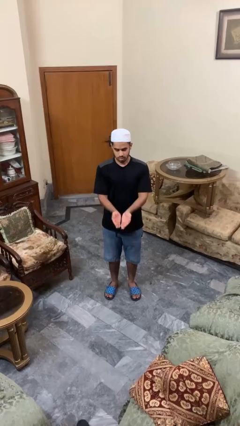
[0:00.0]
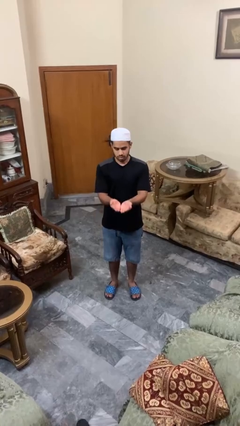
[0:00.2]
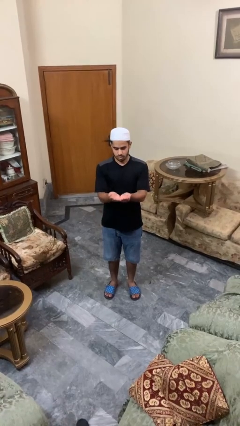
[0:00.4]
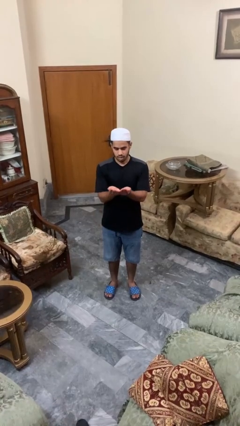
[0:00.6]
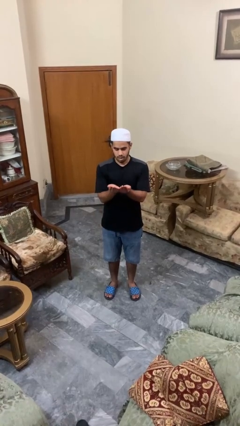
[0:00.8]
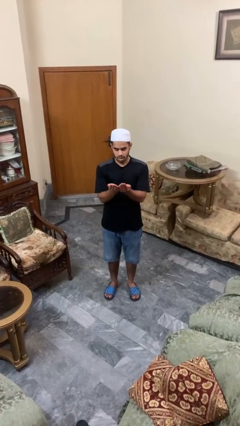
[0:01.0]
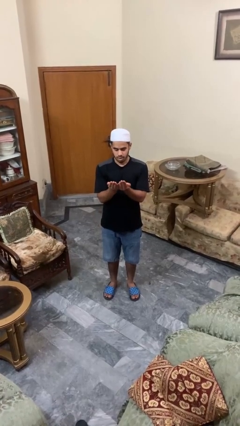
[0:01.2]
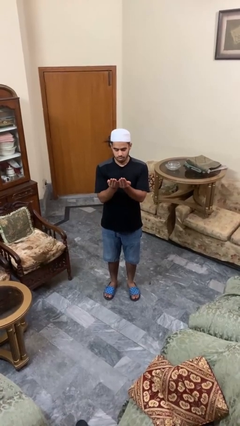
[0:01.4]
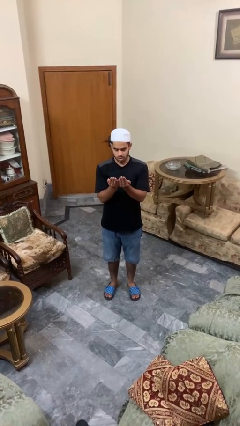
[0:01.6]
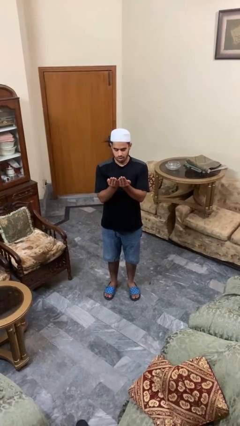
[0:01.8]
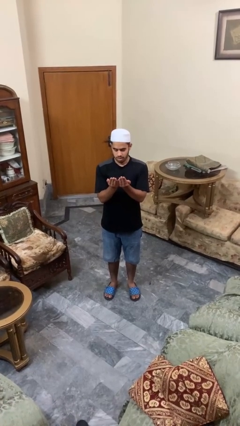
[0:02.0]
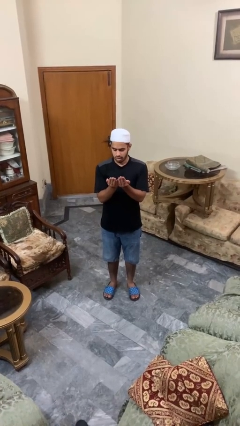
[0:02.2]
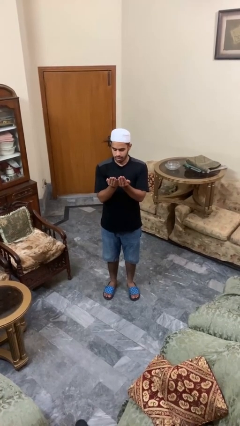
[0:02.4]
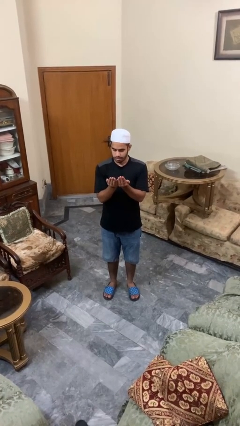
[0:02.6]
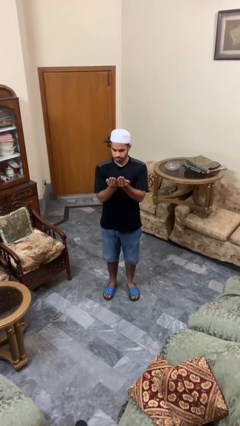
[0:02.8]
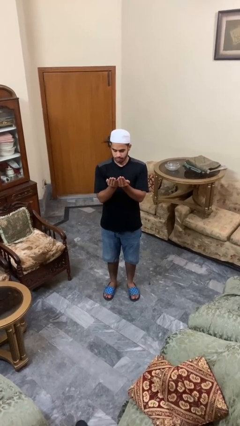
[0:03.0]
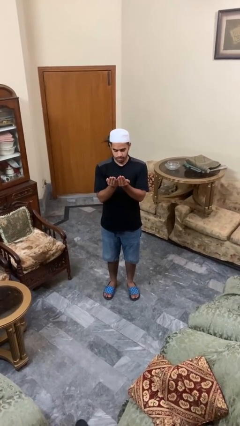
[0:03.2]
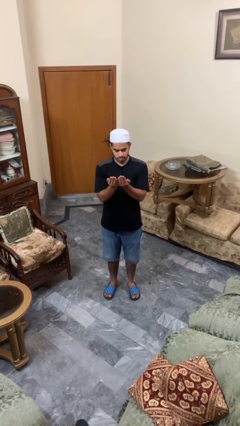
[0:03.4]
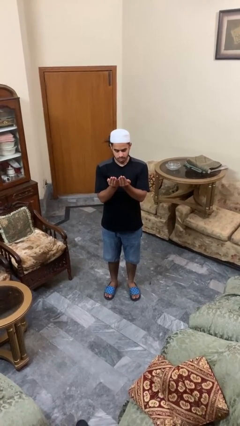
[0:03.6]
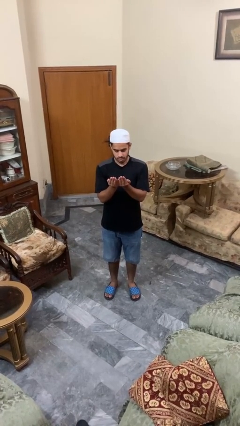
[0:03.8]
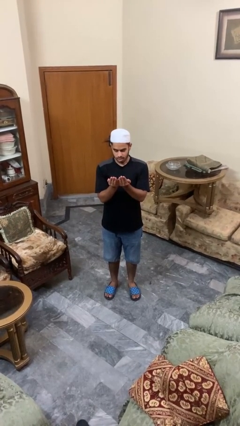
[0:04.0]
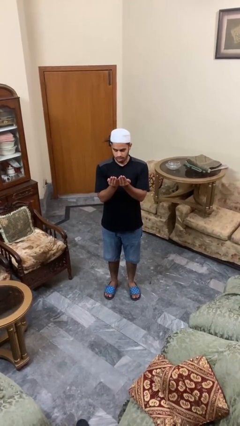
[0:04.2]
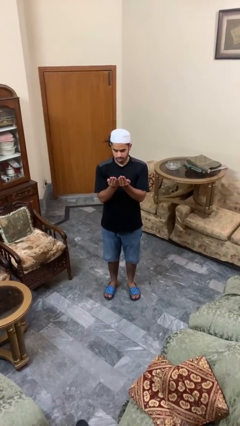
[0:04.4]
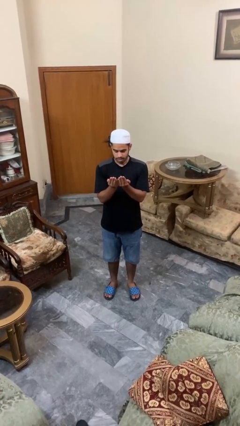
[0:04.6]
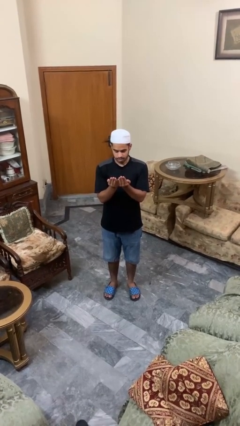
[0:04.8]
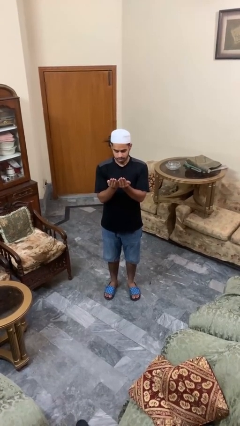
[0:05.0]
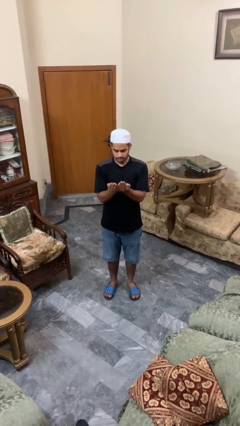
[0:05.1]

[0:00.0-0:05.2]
person prays

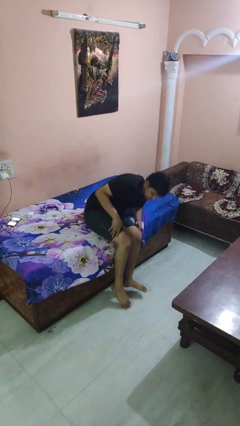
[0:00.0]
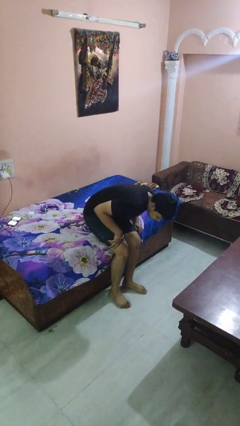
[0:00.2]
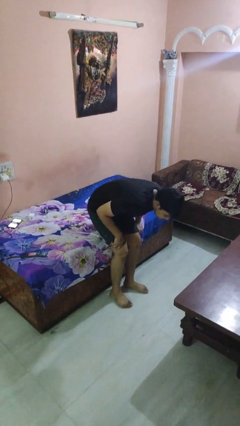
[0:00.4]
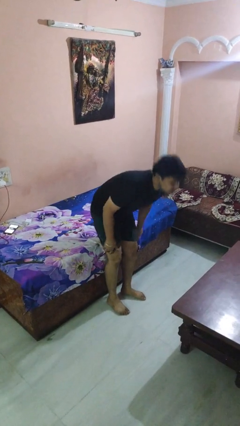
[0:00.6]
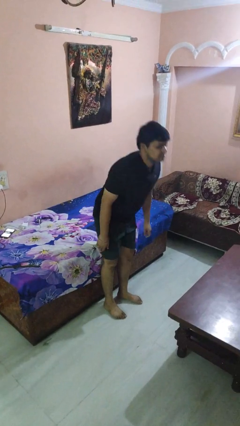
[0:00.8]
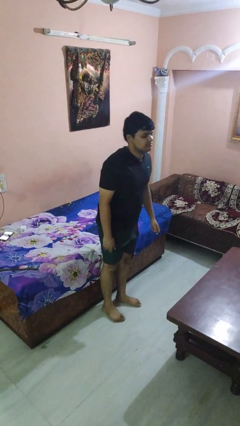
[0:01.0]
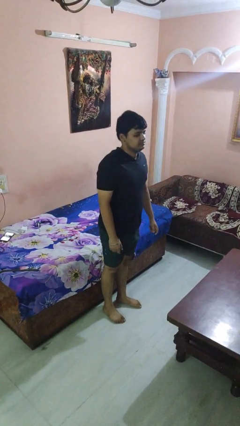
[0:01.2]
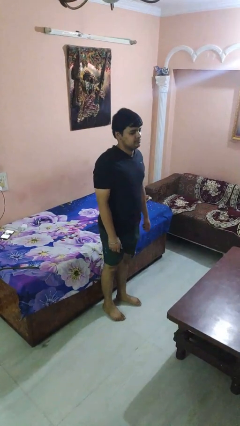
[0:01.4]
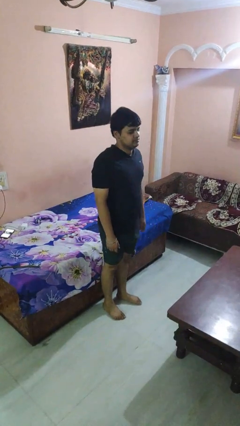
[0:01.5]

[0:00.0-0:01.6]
person stands up

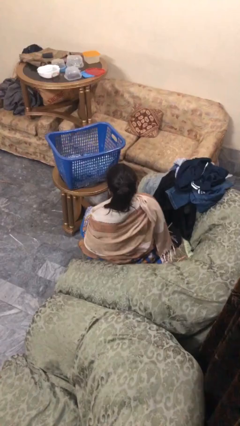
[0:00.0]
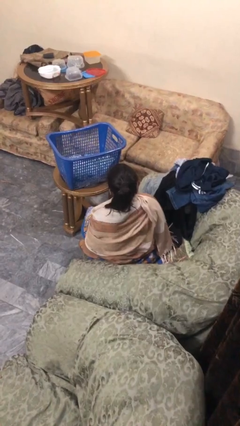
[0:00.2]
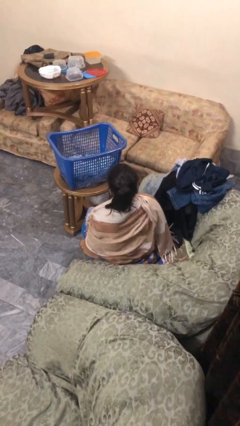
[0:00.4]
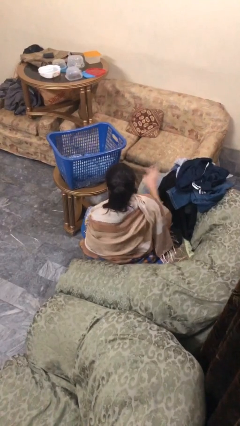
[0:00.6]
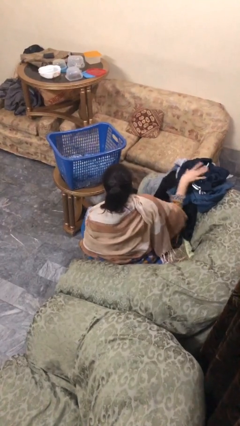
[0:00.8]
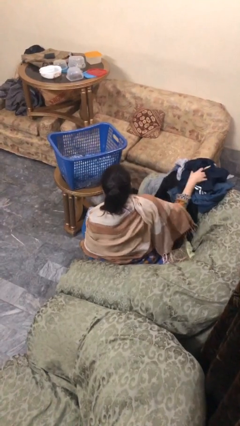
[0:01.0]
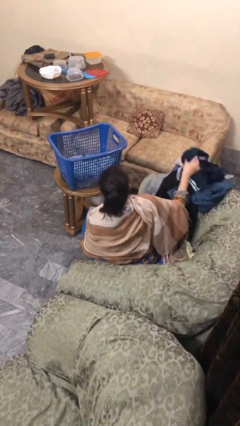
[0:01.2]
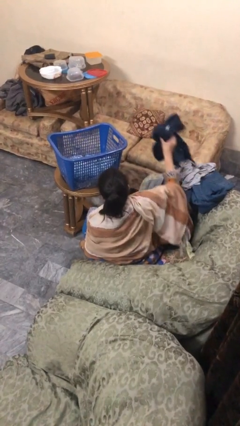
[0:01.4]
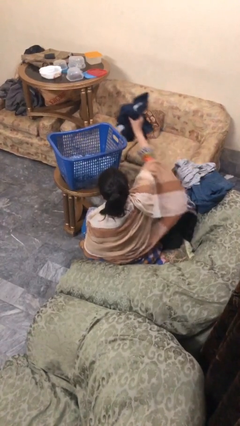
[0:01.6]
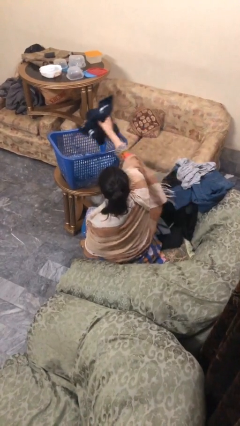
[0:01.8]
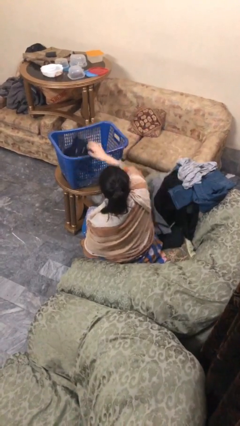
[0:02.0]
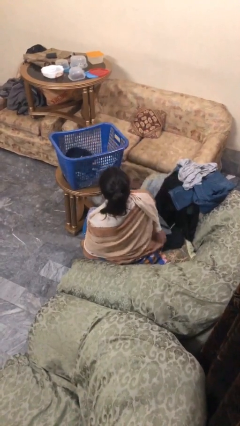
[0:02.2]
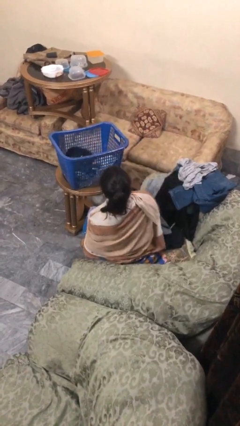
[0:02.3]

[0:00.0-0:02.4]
person puts object into basket

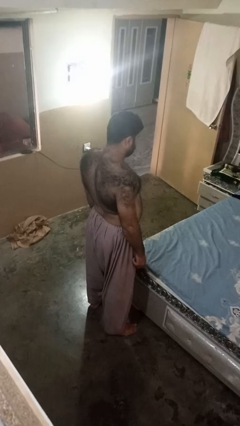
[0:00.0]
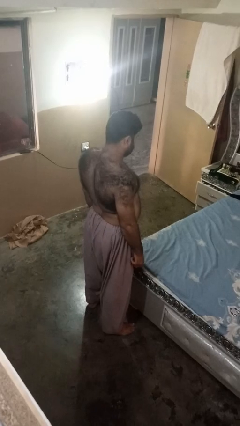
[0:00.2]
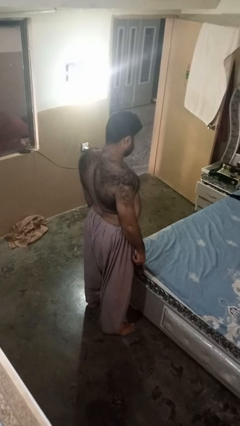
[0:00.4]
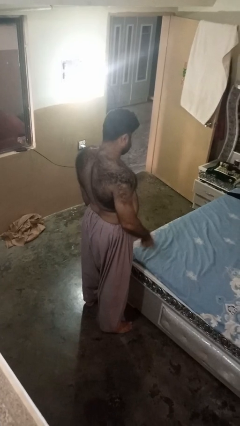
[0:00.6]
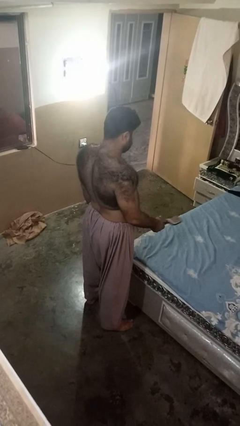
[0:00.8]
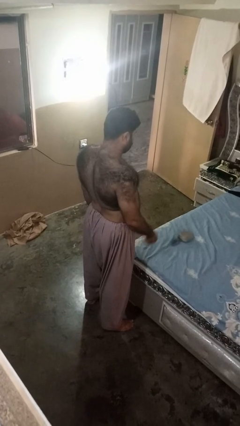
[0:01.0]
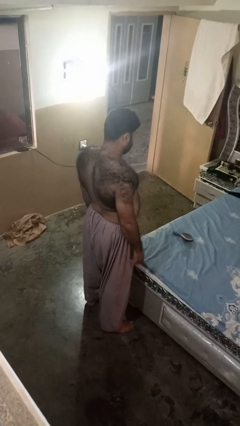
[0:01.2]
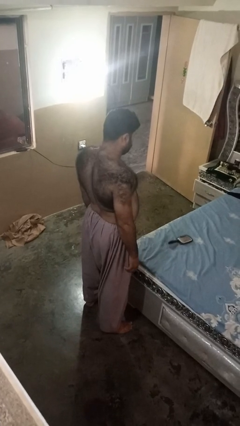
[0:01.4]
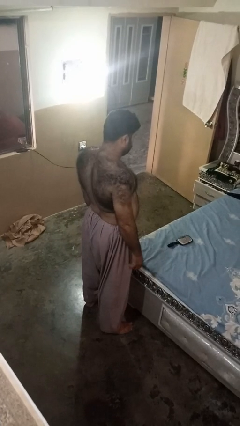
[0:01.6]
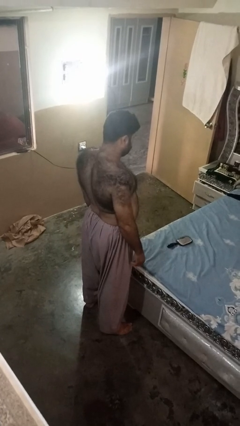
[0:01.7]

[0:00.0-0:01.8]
person throws object on bed

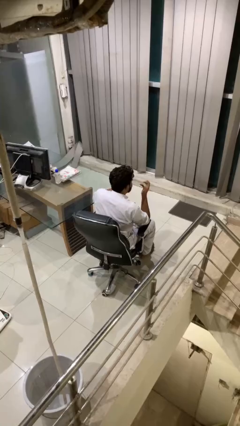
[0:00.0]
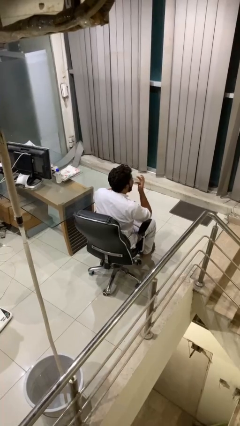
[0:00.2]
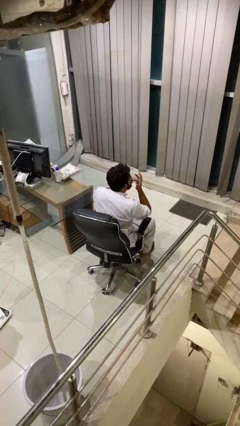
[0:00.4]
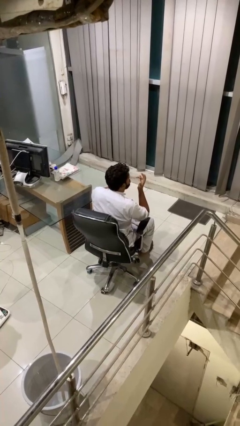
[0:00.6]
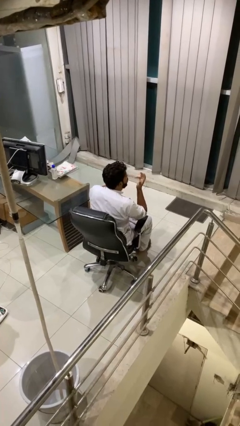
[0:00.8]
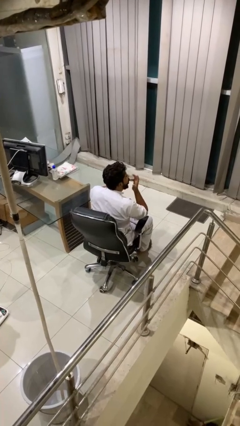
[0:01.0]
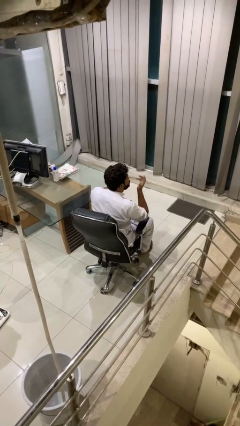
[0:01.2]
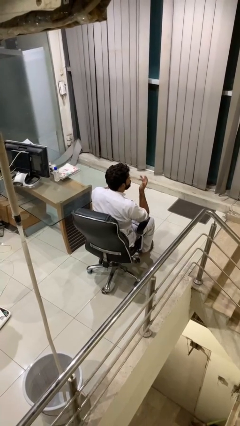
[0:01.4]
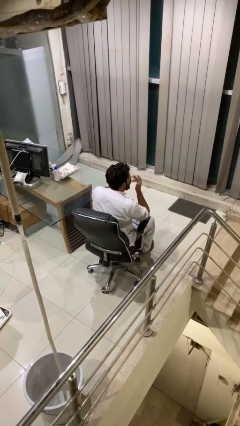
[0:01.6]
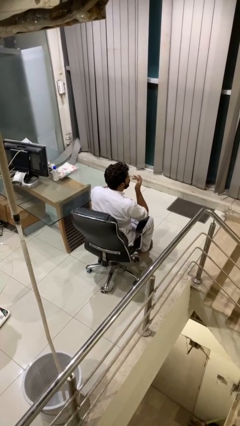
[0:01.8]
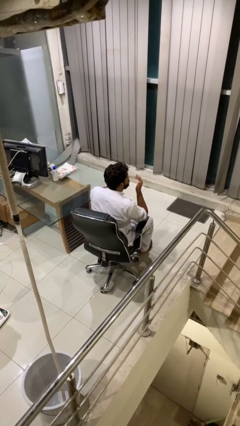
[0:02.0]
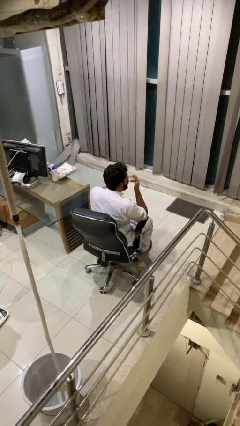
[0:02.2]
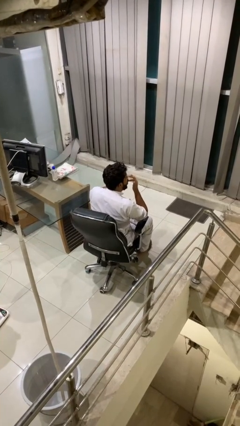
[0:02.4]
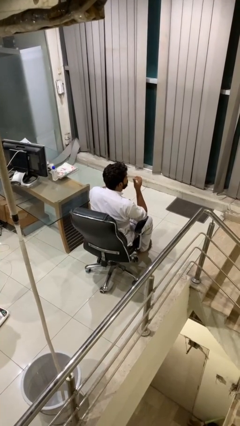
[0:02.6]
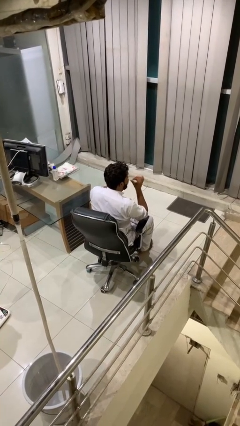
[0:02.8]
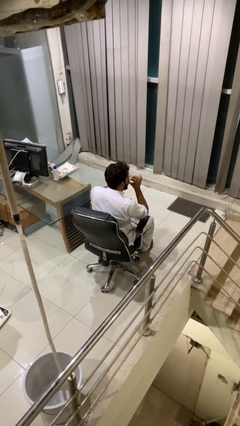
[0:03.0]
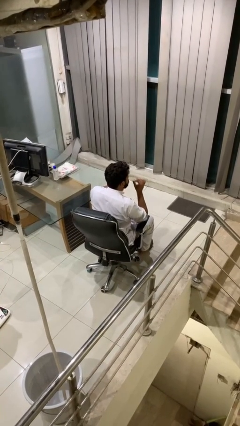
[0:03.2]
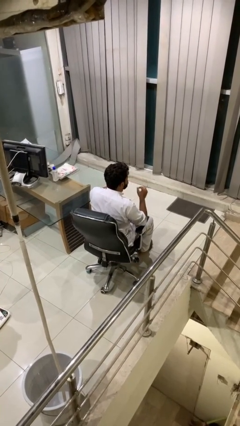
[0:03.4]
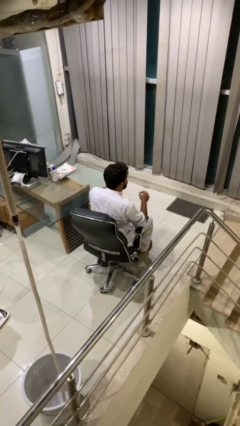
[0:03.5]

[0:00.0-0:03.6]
person licks fingers

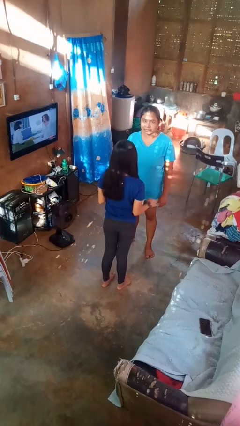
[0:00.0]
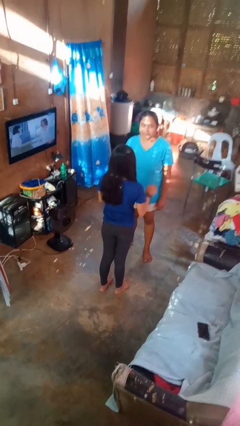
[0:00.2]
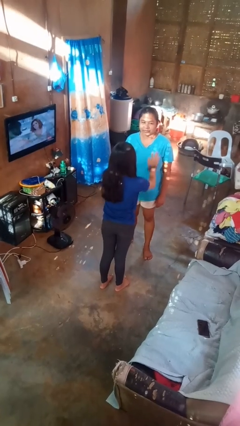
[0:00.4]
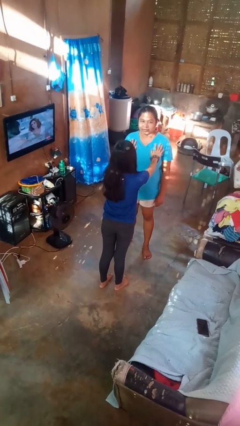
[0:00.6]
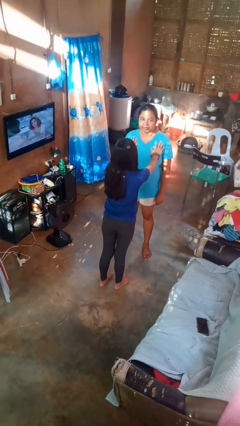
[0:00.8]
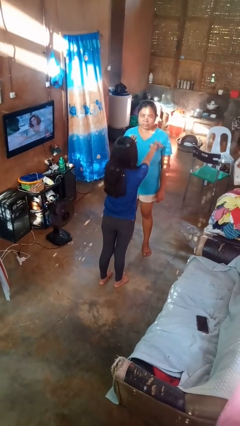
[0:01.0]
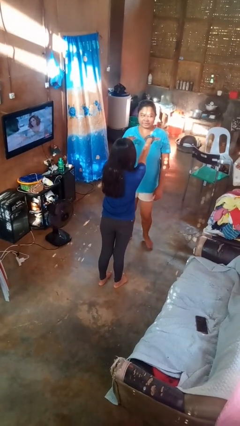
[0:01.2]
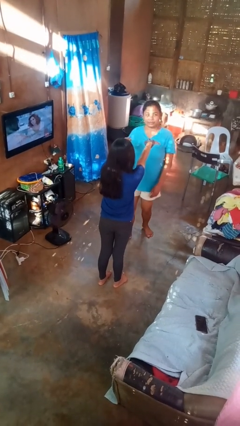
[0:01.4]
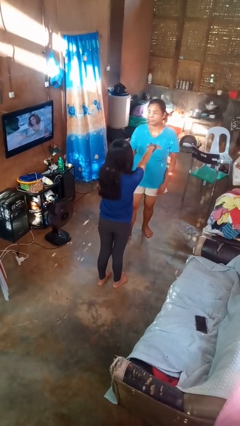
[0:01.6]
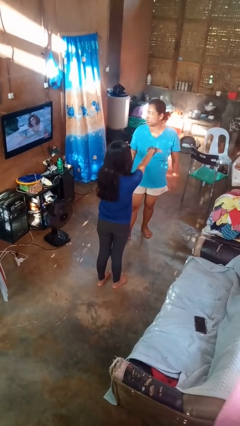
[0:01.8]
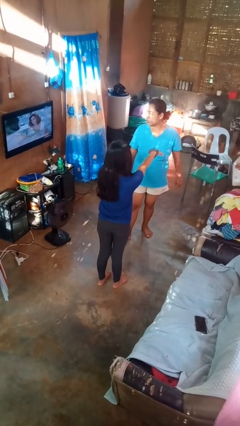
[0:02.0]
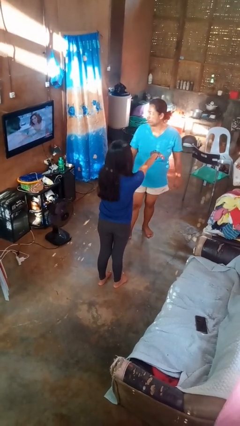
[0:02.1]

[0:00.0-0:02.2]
person shoves person
